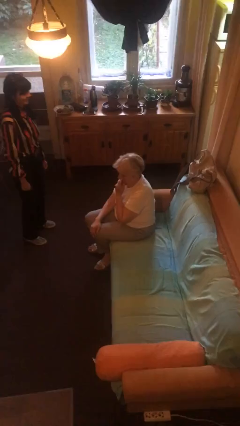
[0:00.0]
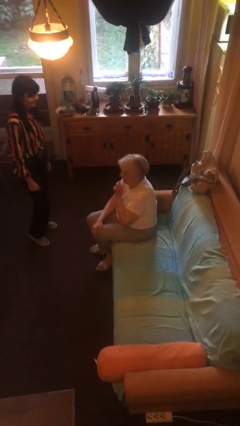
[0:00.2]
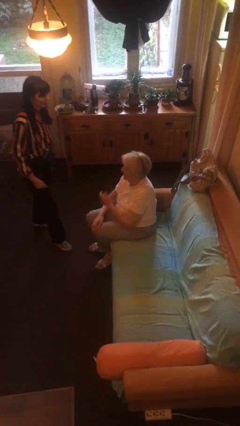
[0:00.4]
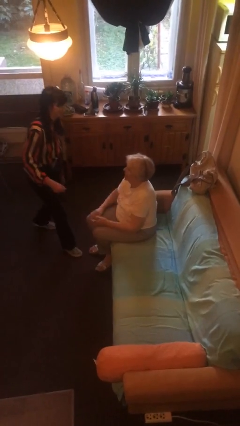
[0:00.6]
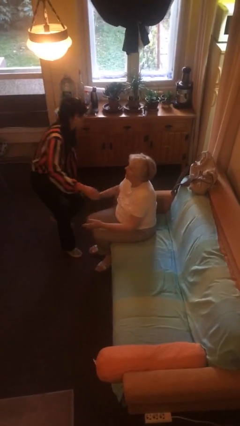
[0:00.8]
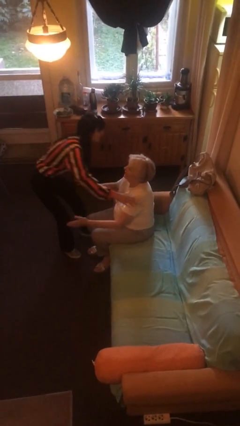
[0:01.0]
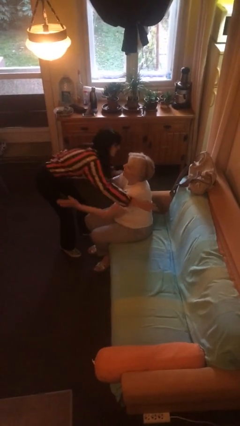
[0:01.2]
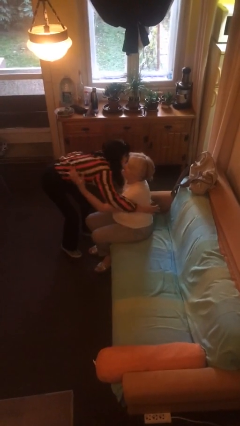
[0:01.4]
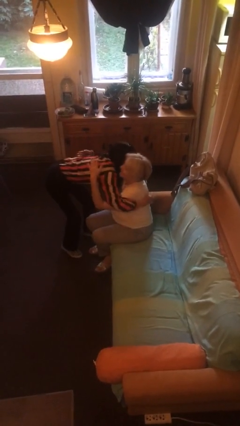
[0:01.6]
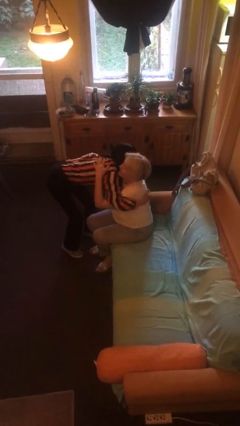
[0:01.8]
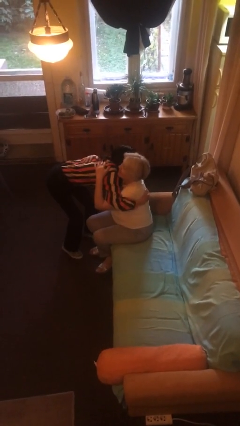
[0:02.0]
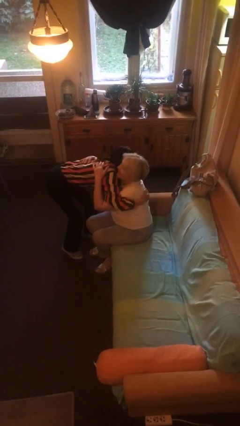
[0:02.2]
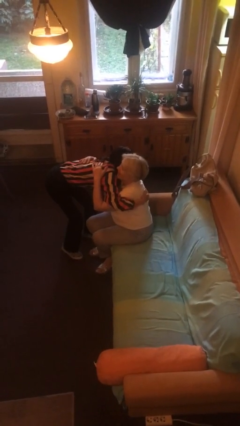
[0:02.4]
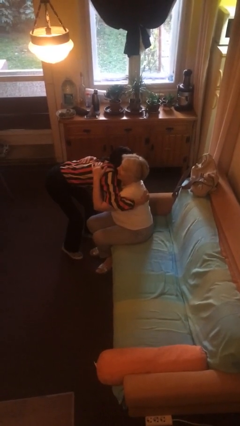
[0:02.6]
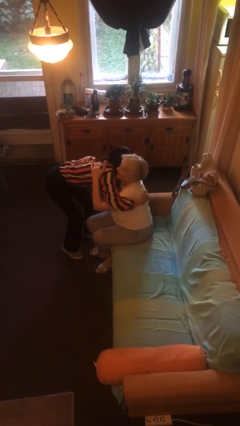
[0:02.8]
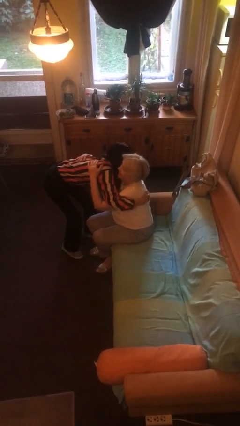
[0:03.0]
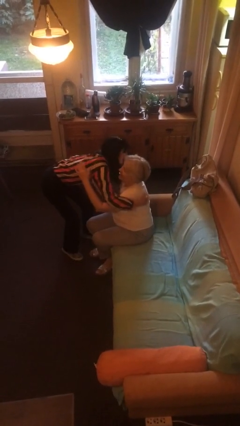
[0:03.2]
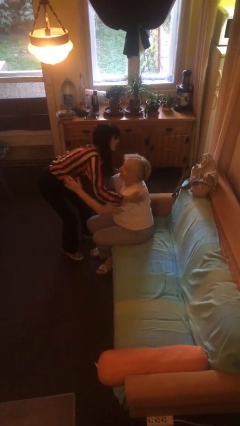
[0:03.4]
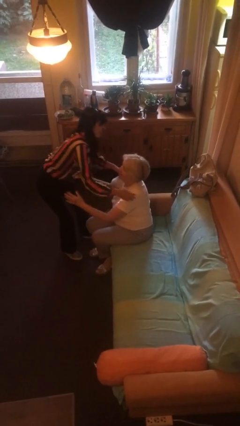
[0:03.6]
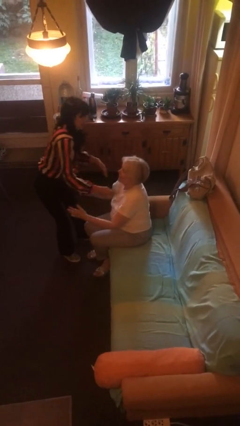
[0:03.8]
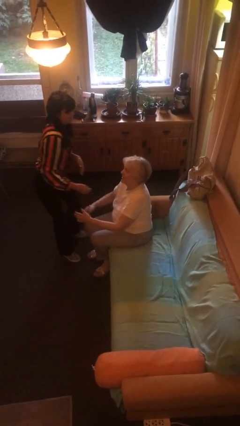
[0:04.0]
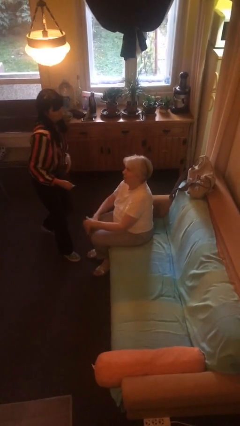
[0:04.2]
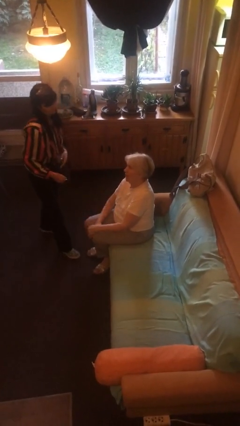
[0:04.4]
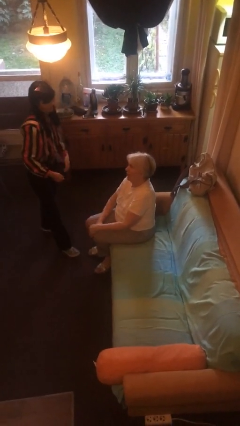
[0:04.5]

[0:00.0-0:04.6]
person embraces person

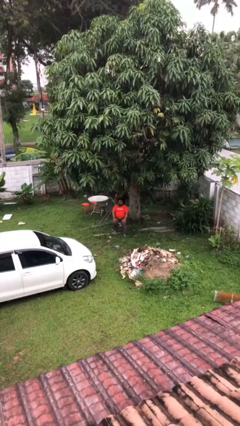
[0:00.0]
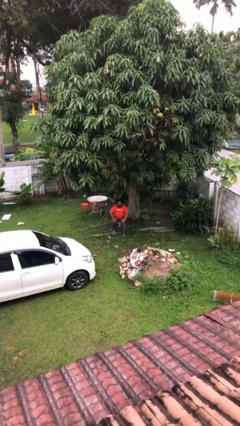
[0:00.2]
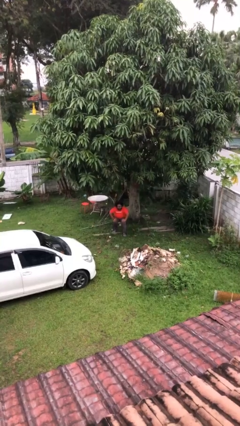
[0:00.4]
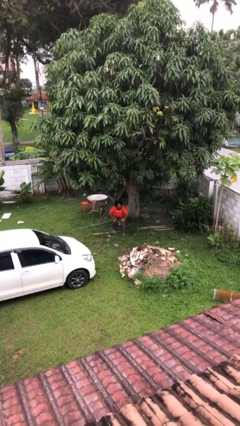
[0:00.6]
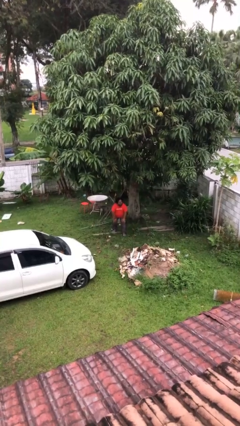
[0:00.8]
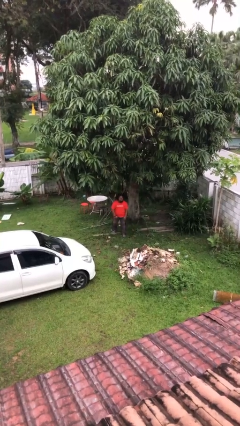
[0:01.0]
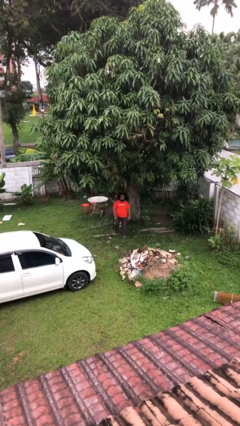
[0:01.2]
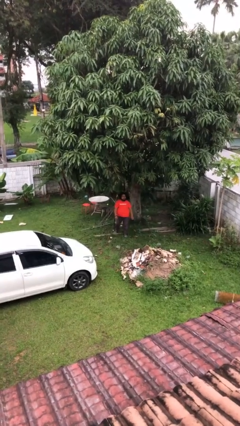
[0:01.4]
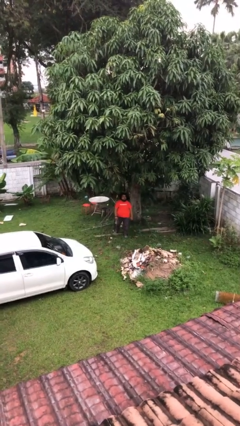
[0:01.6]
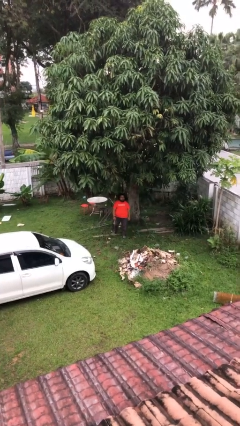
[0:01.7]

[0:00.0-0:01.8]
person stands up

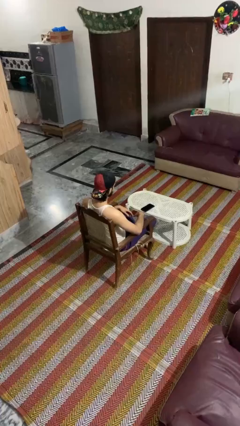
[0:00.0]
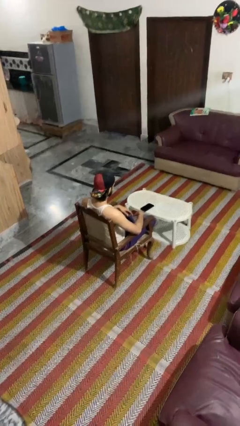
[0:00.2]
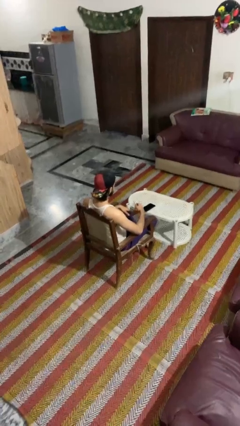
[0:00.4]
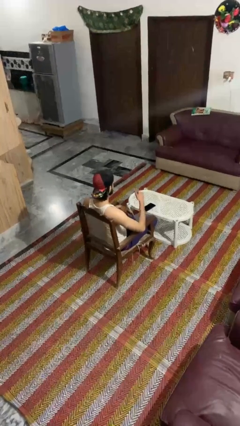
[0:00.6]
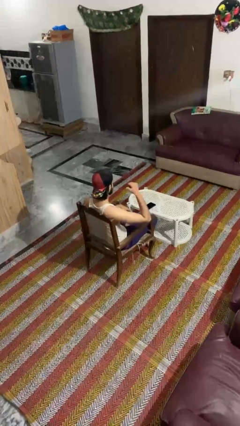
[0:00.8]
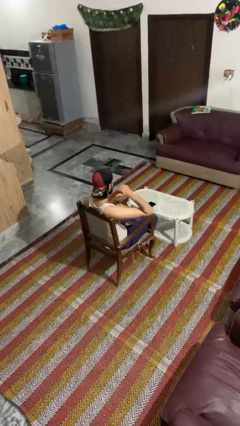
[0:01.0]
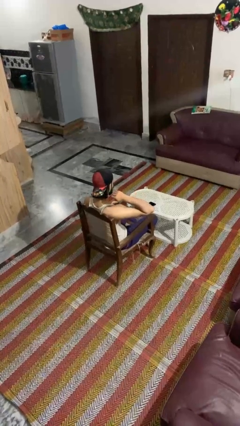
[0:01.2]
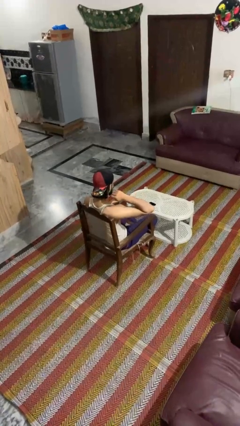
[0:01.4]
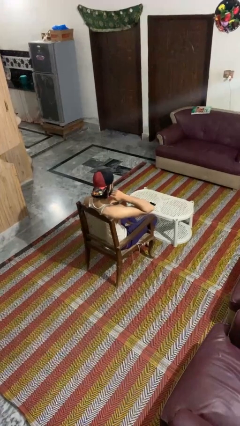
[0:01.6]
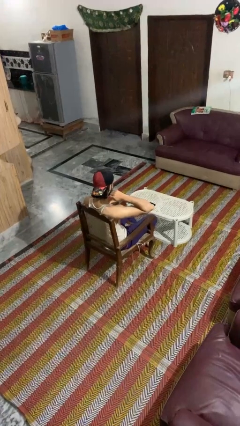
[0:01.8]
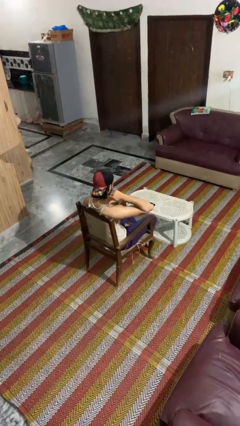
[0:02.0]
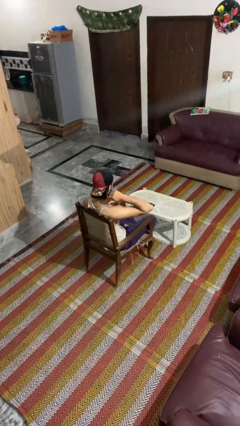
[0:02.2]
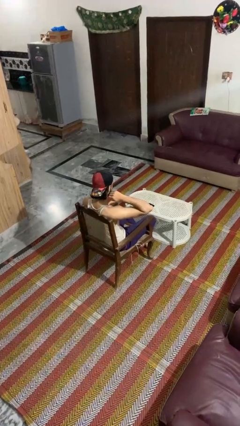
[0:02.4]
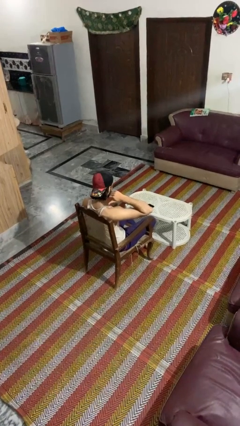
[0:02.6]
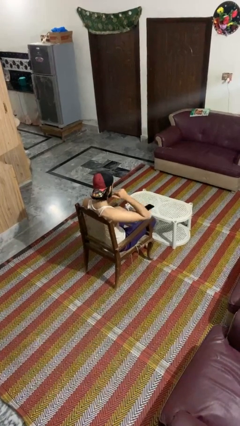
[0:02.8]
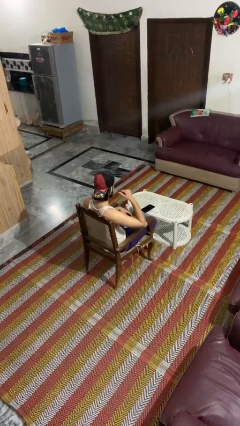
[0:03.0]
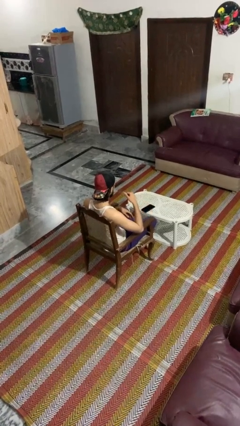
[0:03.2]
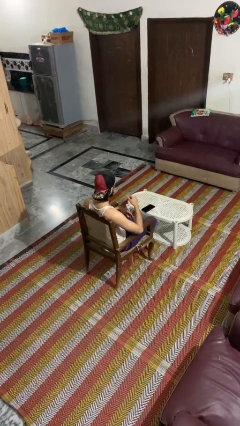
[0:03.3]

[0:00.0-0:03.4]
person gestures behind me

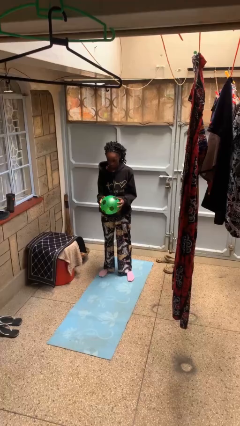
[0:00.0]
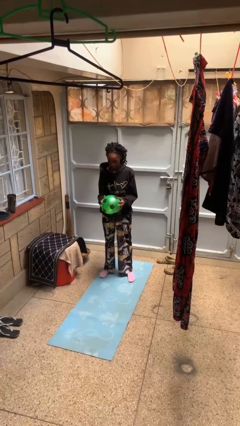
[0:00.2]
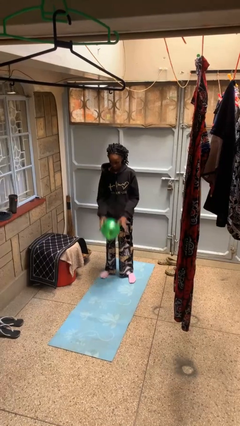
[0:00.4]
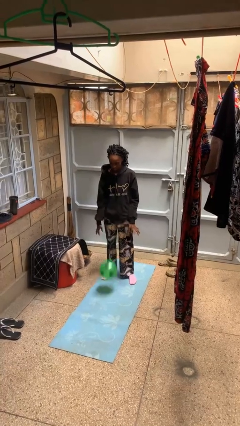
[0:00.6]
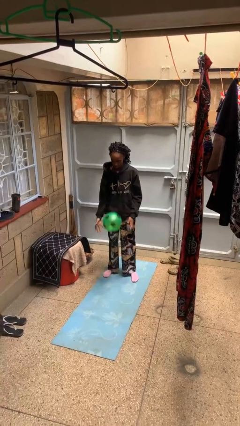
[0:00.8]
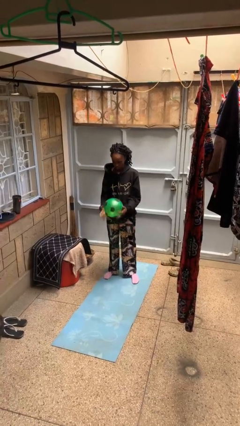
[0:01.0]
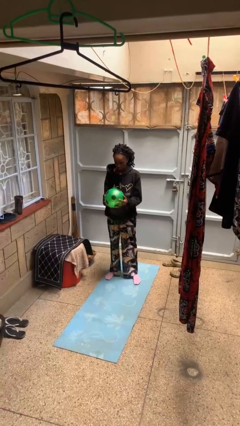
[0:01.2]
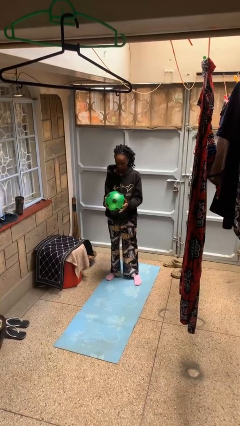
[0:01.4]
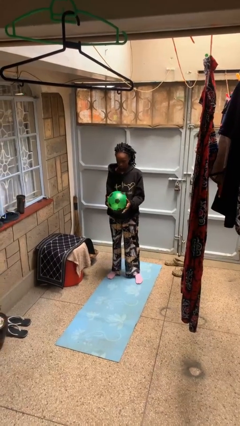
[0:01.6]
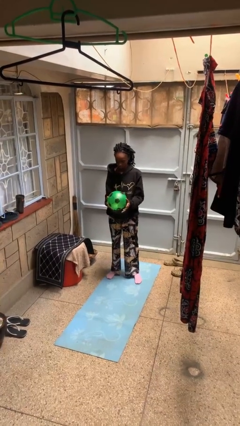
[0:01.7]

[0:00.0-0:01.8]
person bounces ball on floor

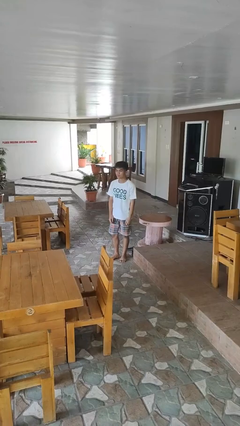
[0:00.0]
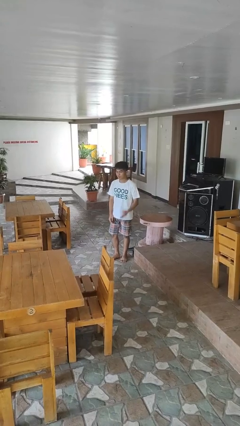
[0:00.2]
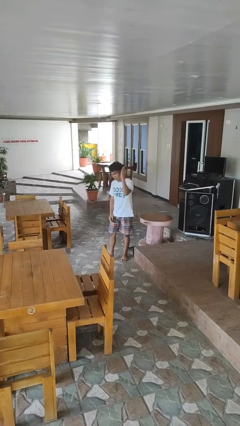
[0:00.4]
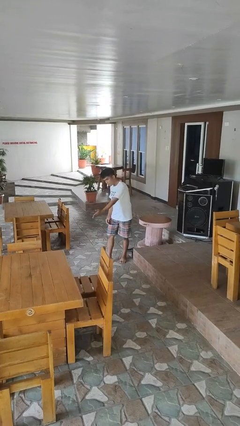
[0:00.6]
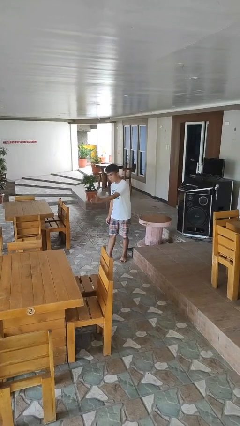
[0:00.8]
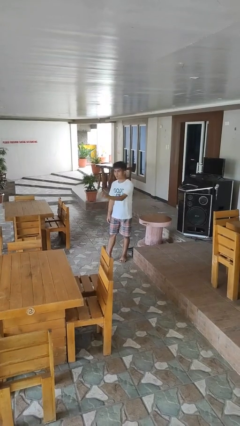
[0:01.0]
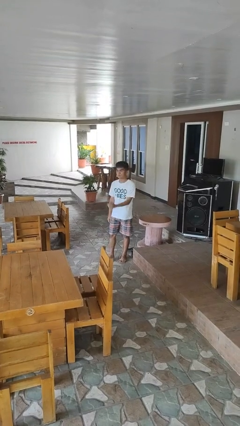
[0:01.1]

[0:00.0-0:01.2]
person karate chop

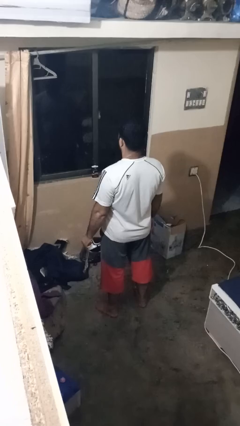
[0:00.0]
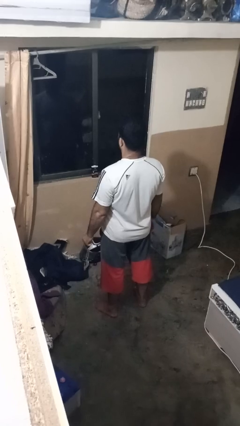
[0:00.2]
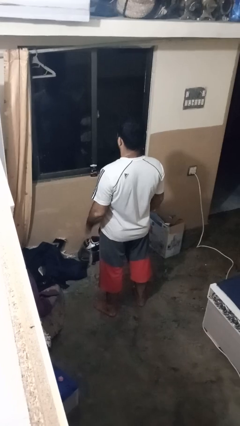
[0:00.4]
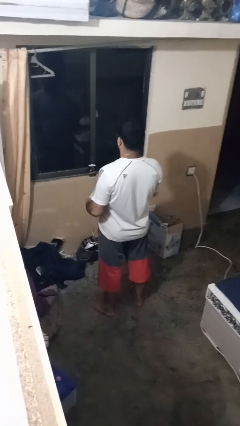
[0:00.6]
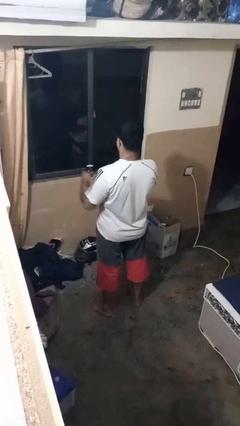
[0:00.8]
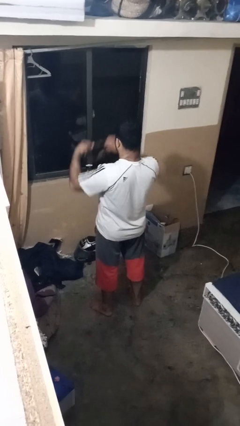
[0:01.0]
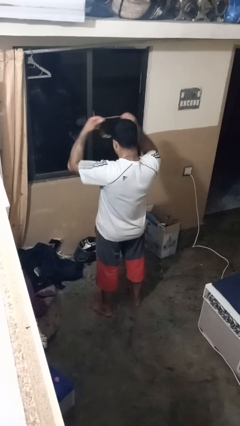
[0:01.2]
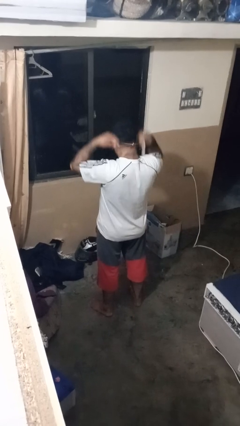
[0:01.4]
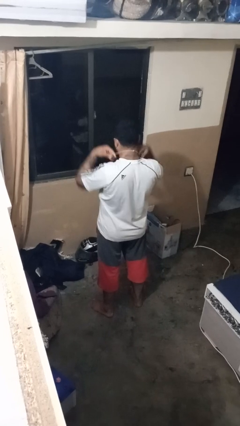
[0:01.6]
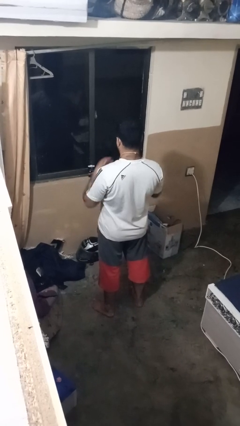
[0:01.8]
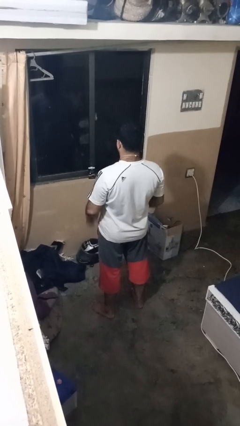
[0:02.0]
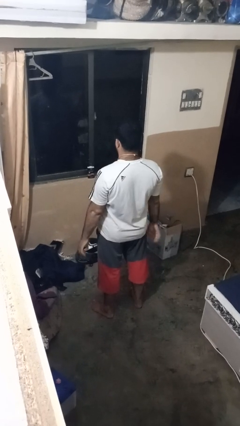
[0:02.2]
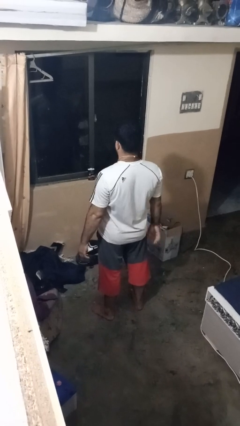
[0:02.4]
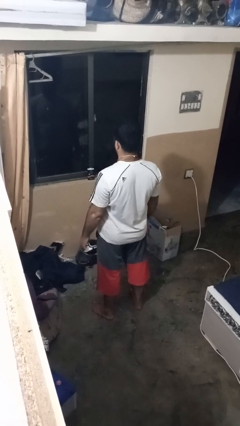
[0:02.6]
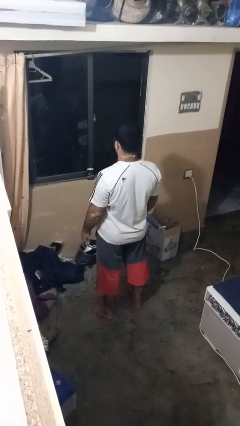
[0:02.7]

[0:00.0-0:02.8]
person puts on necklace

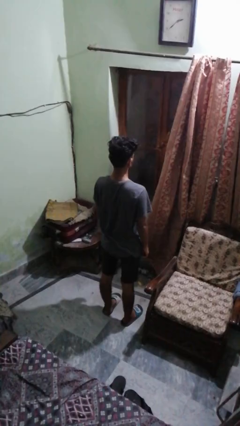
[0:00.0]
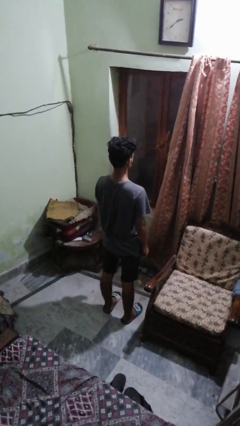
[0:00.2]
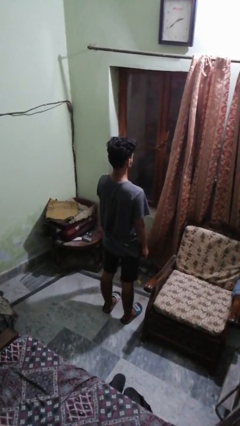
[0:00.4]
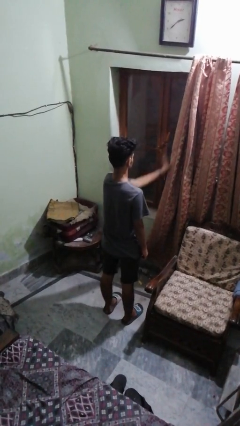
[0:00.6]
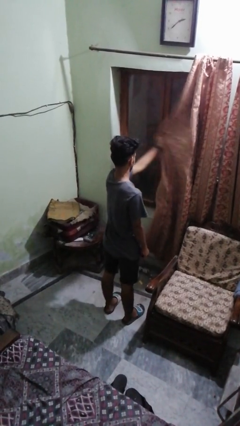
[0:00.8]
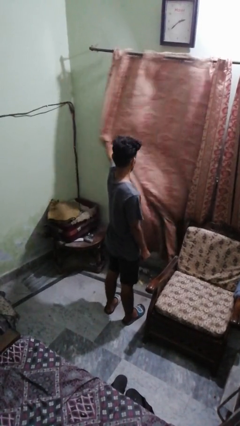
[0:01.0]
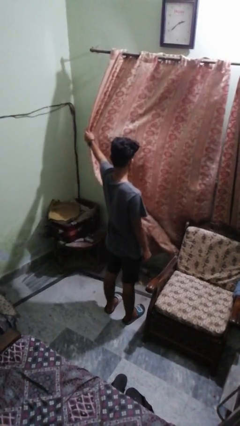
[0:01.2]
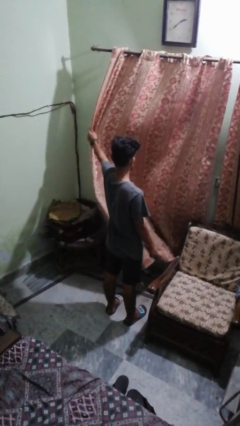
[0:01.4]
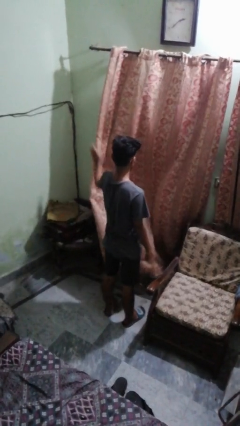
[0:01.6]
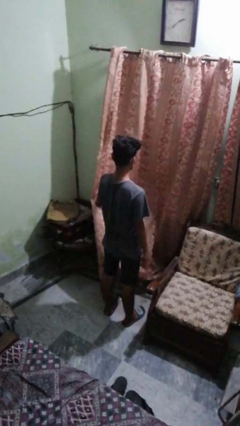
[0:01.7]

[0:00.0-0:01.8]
person closes curtains
